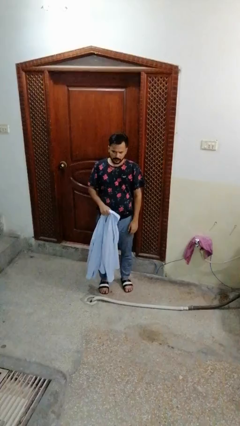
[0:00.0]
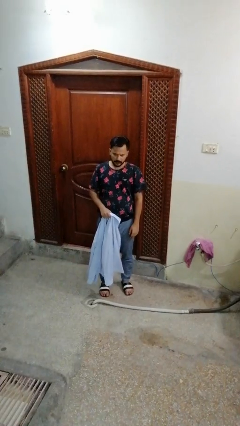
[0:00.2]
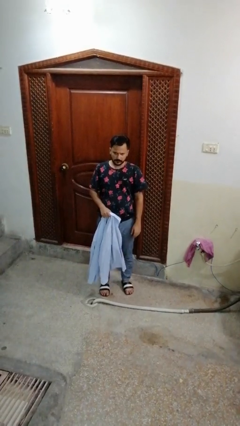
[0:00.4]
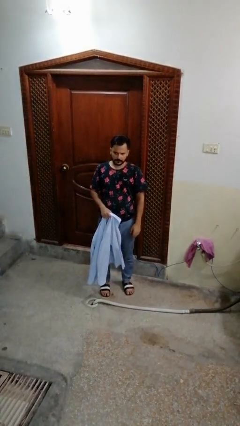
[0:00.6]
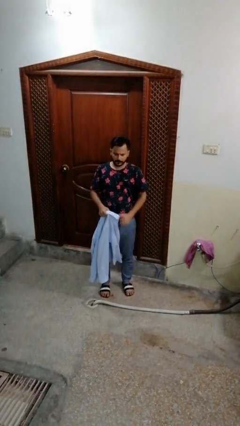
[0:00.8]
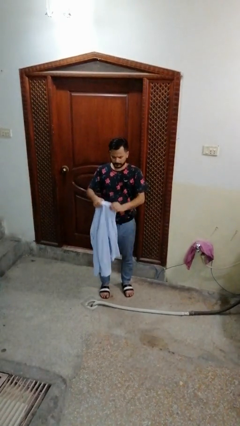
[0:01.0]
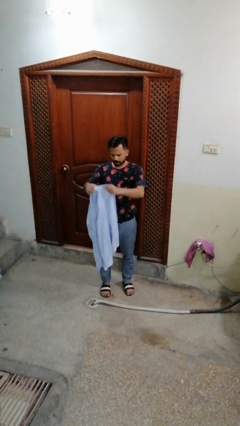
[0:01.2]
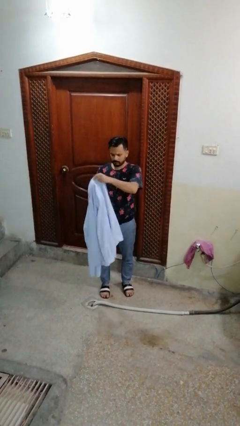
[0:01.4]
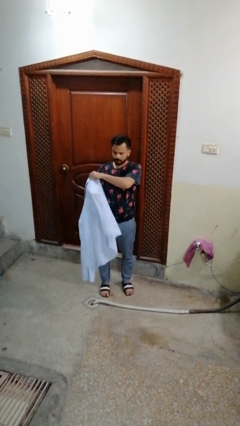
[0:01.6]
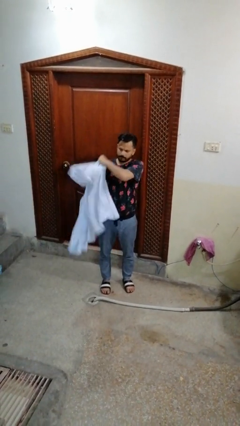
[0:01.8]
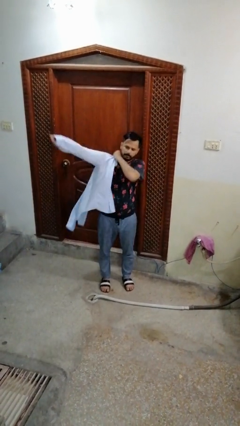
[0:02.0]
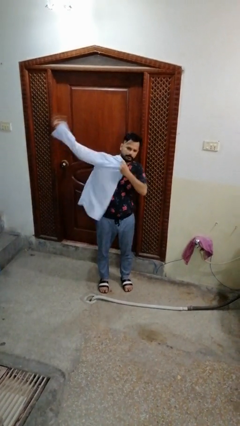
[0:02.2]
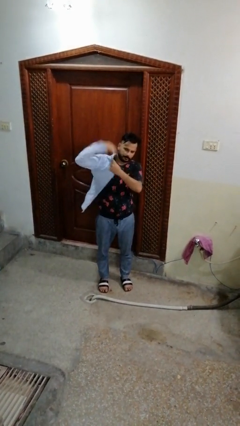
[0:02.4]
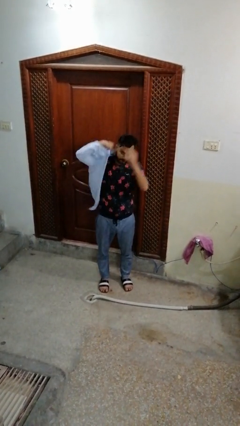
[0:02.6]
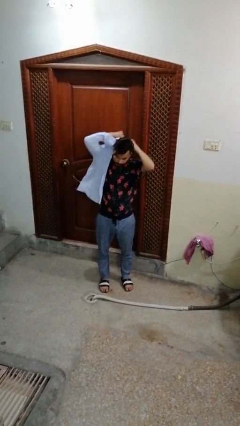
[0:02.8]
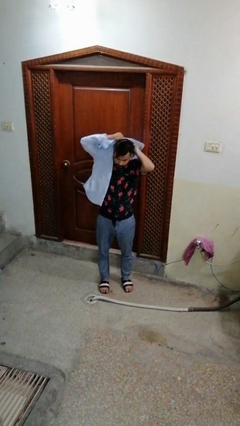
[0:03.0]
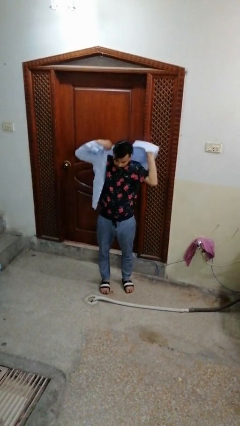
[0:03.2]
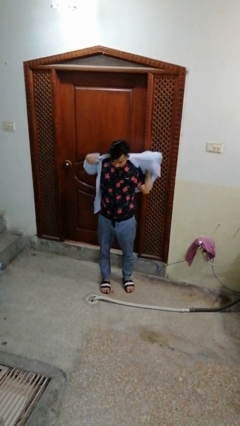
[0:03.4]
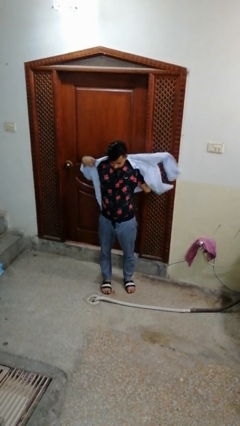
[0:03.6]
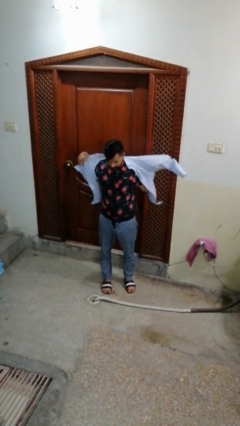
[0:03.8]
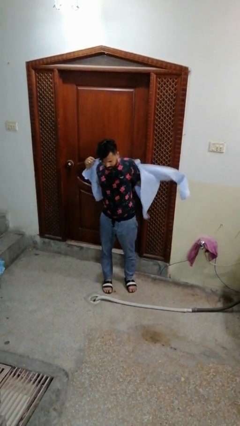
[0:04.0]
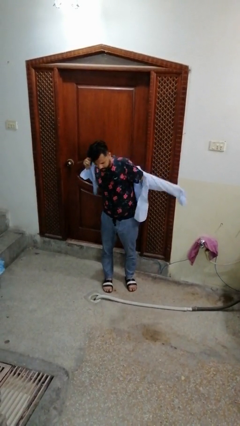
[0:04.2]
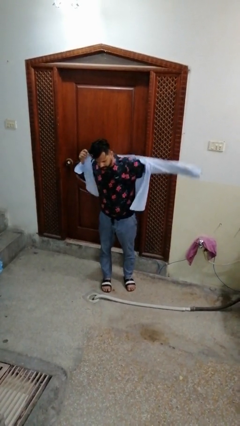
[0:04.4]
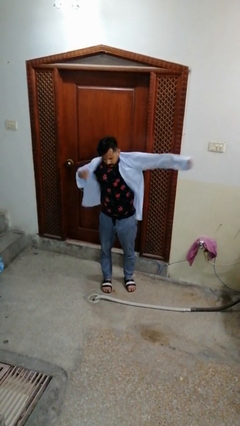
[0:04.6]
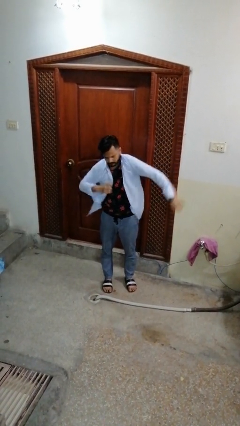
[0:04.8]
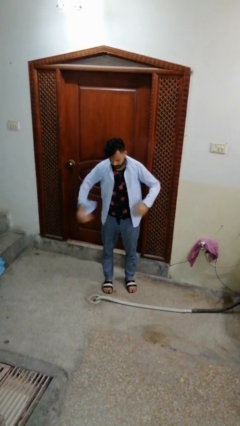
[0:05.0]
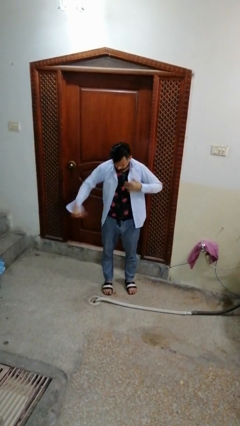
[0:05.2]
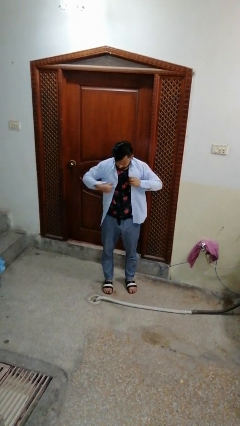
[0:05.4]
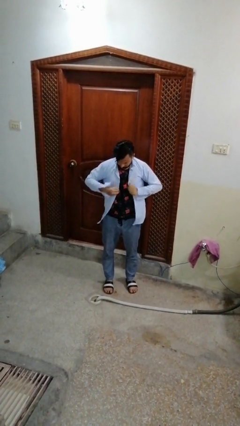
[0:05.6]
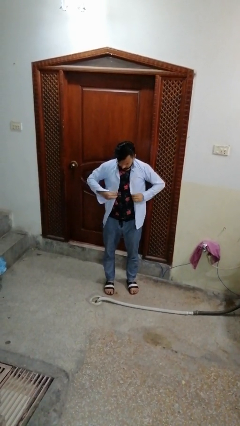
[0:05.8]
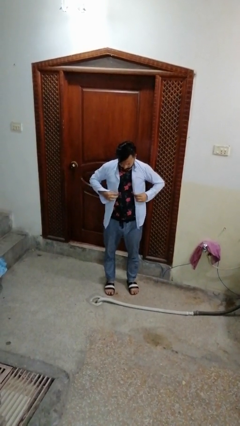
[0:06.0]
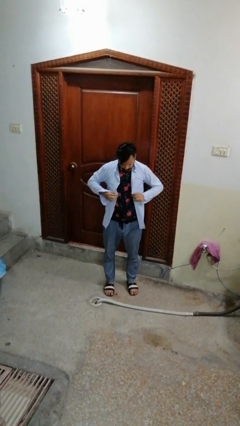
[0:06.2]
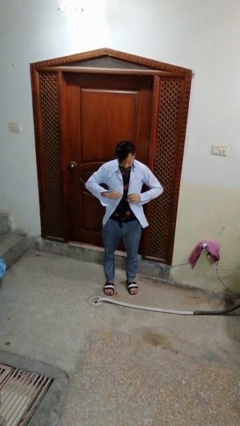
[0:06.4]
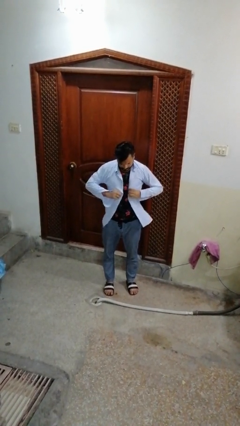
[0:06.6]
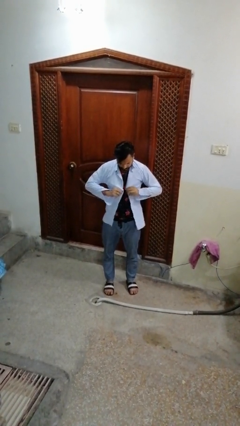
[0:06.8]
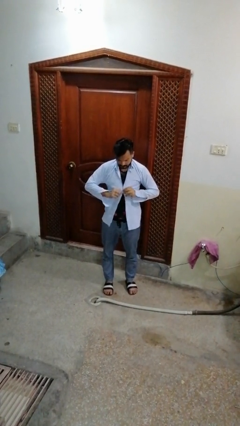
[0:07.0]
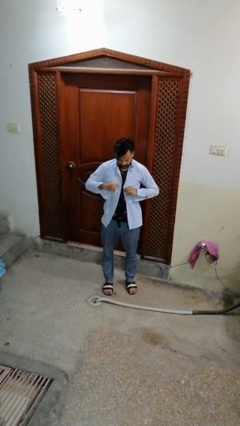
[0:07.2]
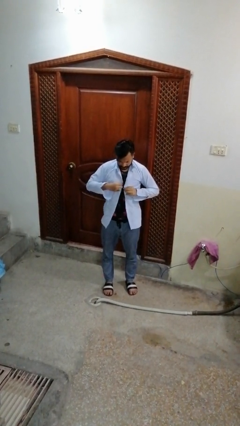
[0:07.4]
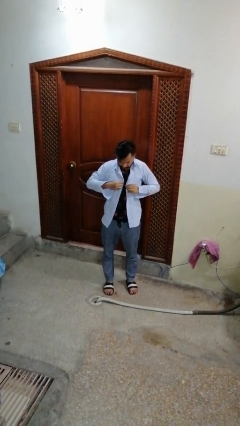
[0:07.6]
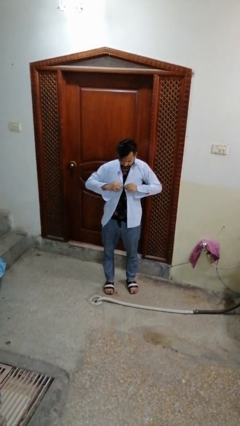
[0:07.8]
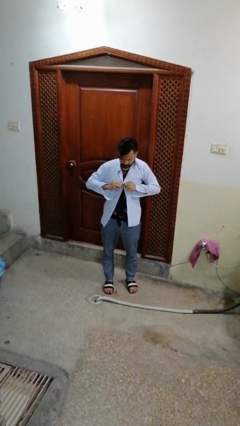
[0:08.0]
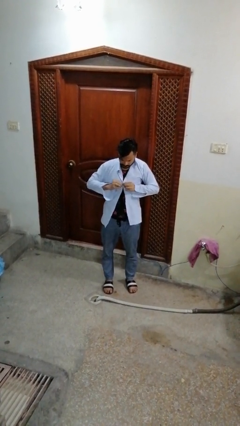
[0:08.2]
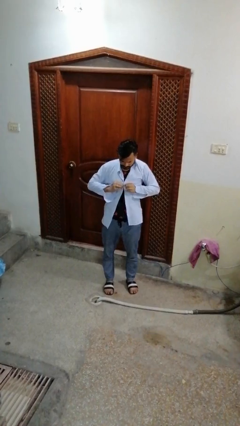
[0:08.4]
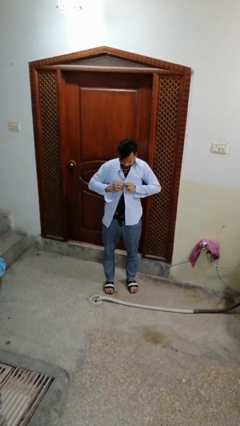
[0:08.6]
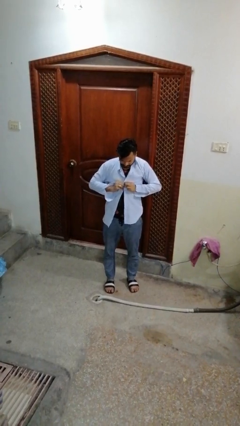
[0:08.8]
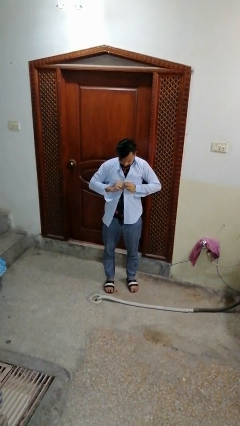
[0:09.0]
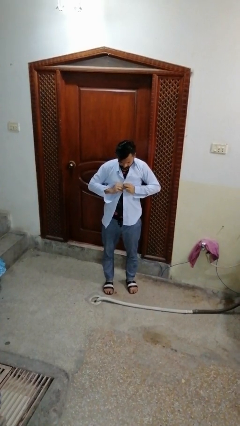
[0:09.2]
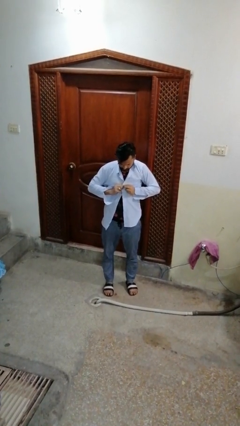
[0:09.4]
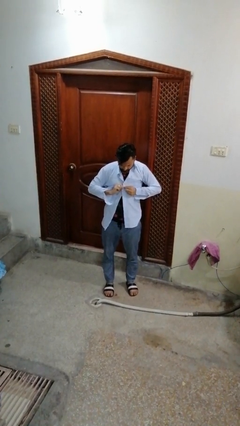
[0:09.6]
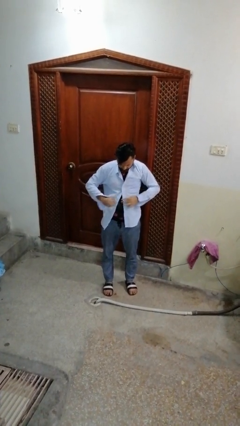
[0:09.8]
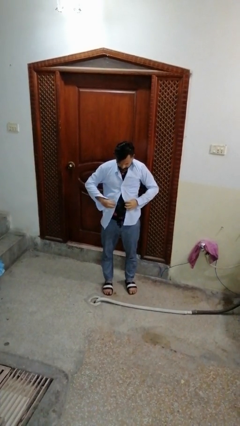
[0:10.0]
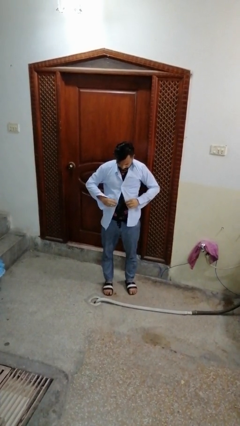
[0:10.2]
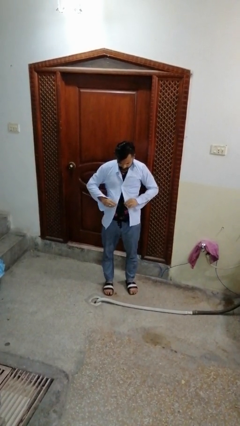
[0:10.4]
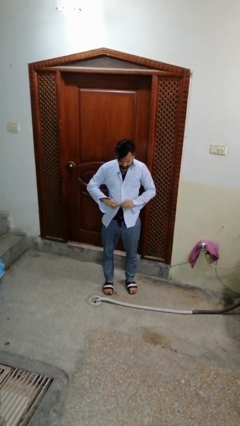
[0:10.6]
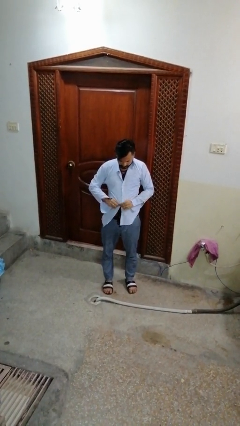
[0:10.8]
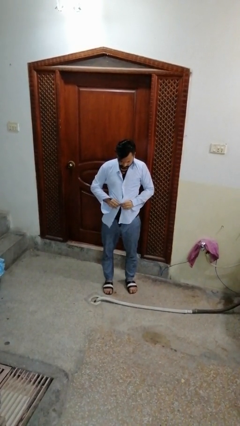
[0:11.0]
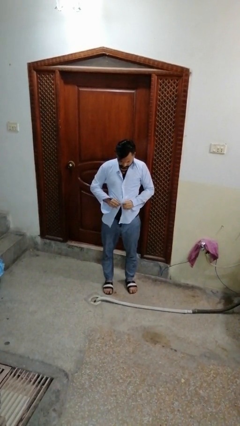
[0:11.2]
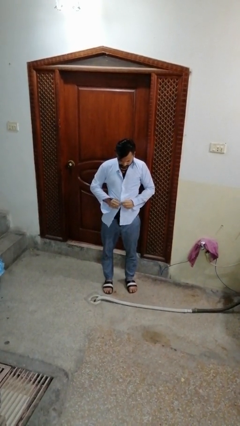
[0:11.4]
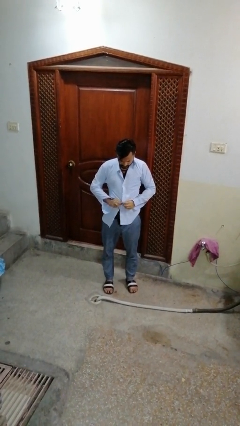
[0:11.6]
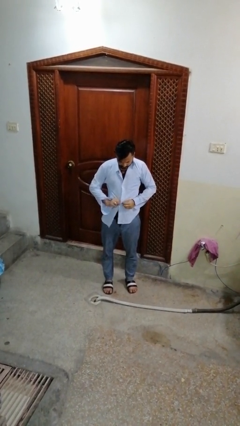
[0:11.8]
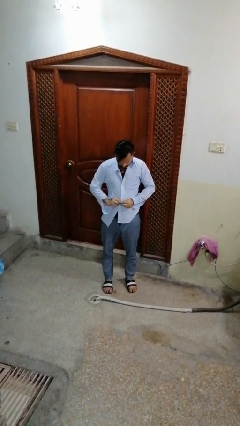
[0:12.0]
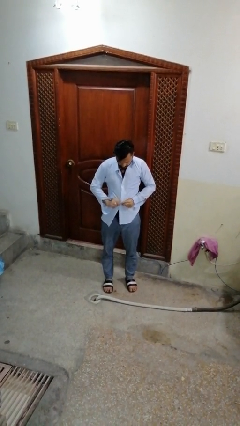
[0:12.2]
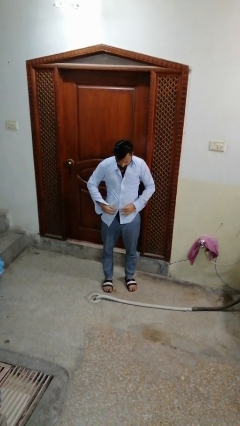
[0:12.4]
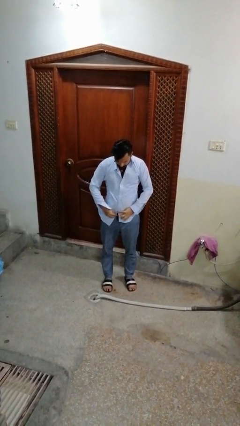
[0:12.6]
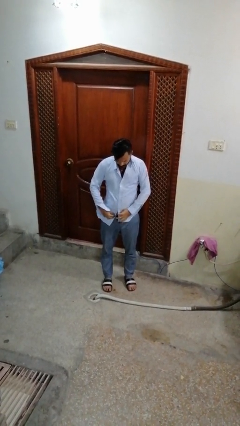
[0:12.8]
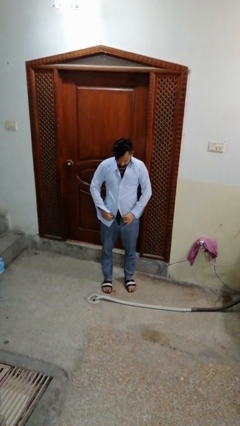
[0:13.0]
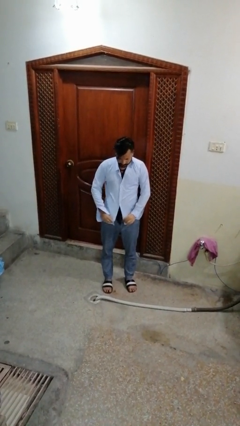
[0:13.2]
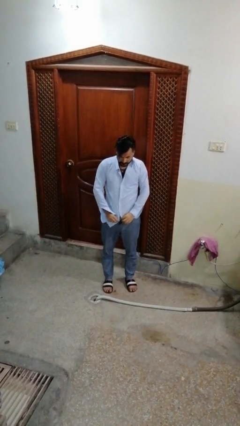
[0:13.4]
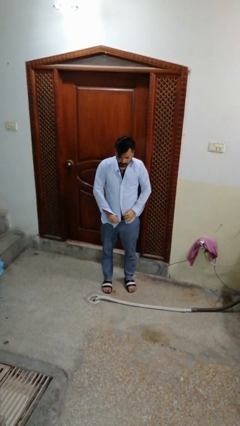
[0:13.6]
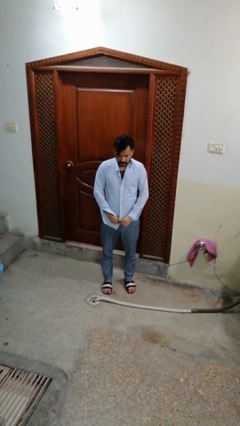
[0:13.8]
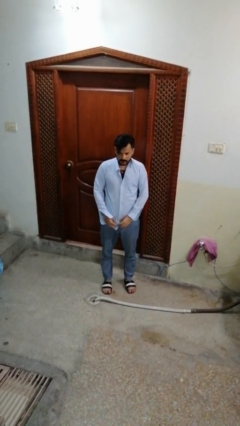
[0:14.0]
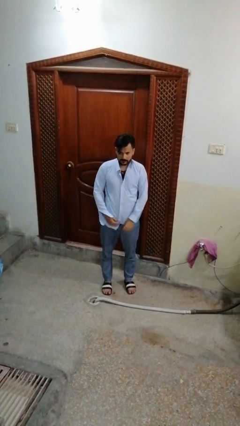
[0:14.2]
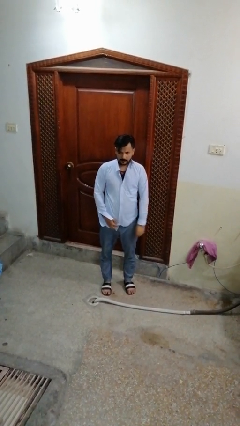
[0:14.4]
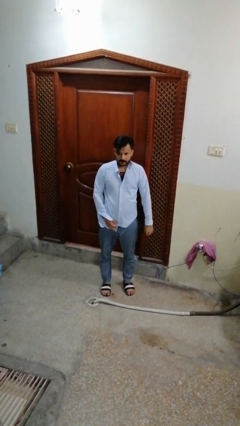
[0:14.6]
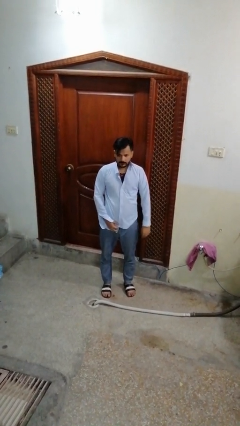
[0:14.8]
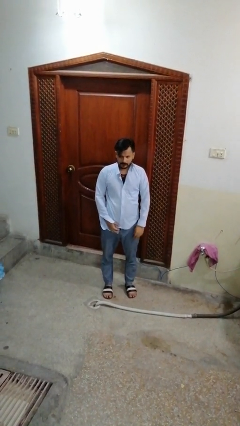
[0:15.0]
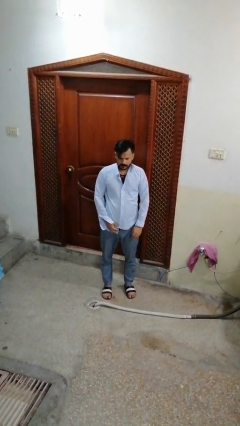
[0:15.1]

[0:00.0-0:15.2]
person puts on shirt

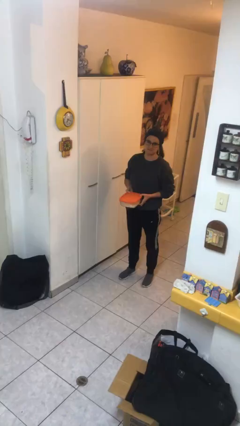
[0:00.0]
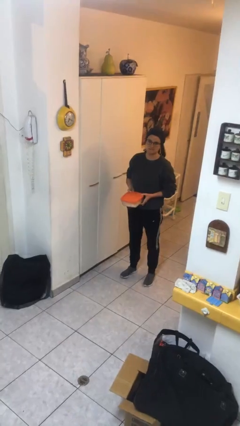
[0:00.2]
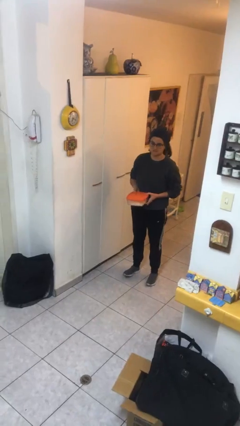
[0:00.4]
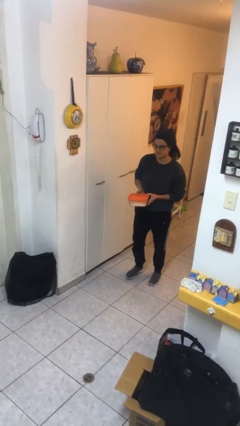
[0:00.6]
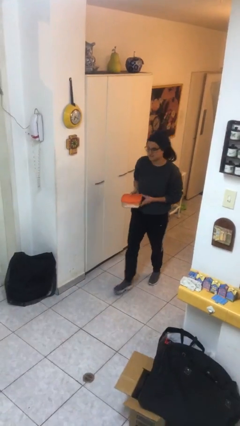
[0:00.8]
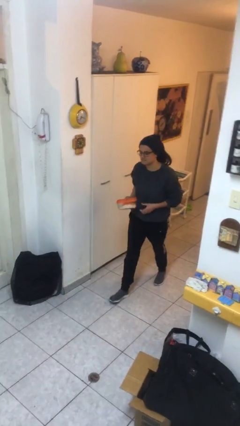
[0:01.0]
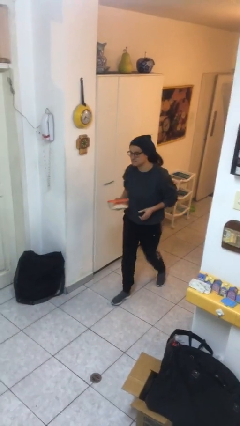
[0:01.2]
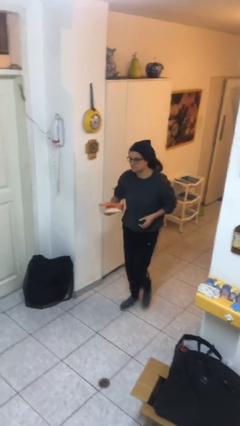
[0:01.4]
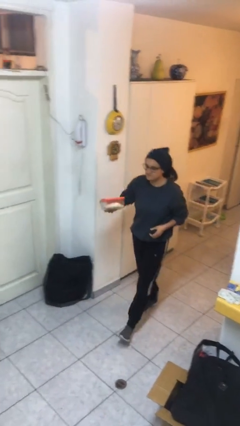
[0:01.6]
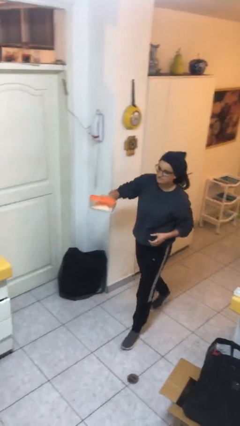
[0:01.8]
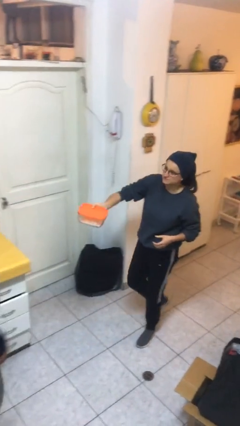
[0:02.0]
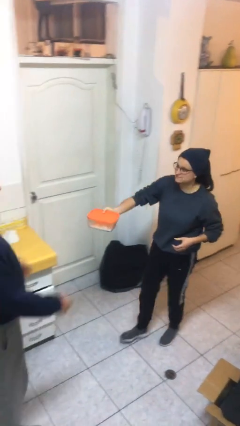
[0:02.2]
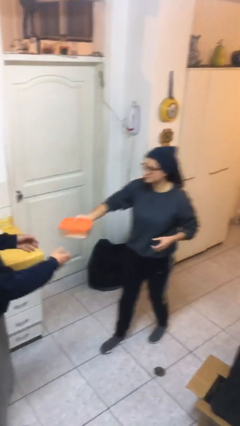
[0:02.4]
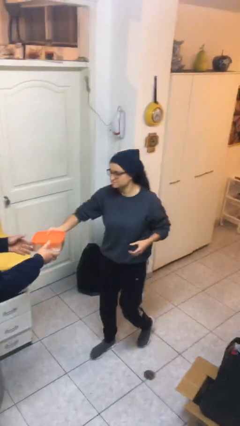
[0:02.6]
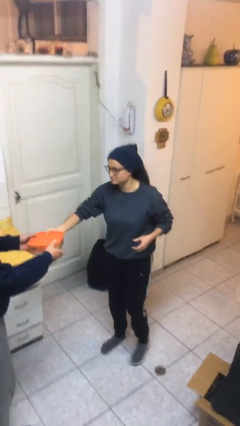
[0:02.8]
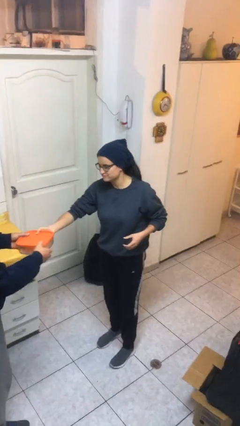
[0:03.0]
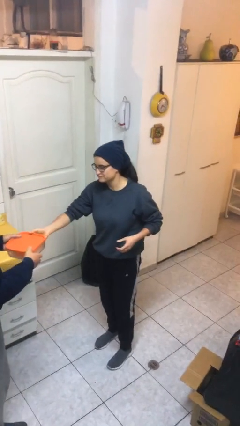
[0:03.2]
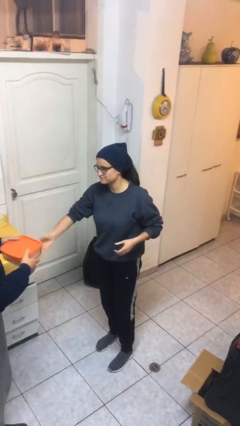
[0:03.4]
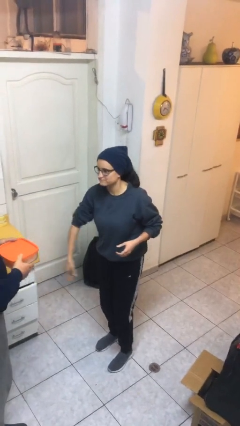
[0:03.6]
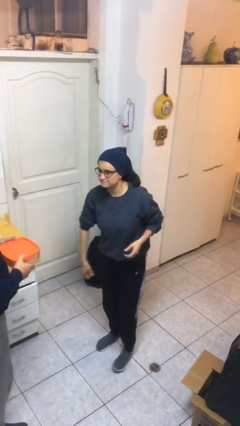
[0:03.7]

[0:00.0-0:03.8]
person transfers object to person
